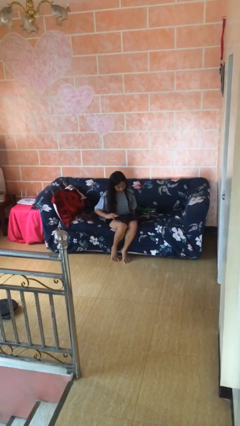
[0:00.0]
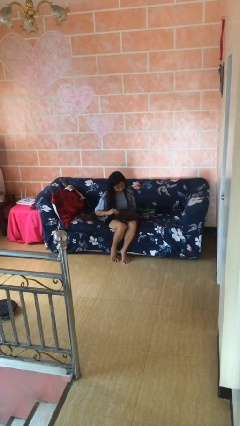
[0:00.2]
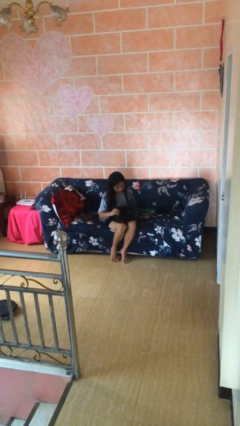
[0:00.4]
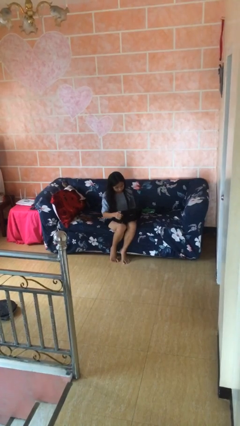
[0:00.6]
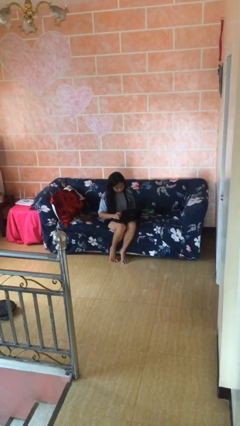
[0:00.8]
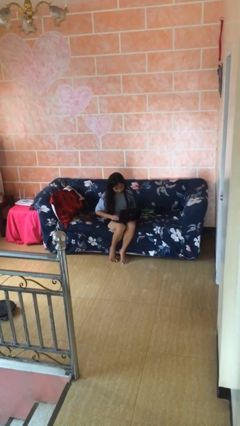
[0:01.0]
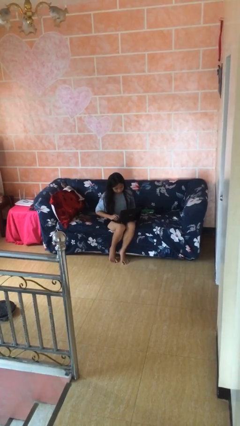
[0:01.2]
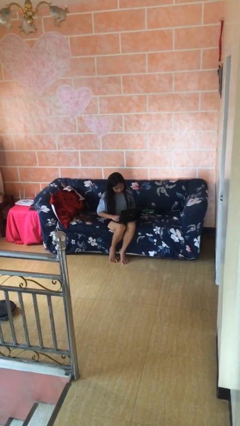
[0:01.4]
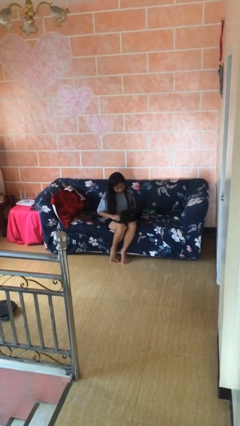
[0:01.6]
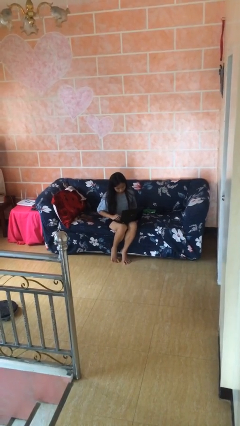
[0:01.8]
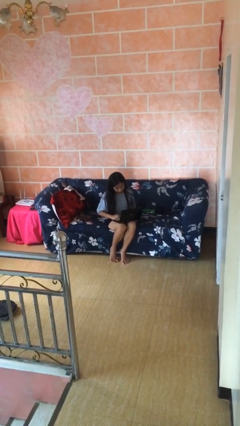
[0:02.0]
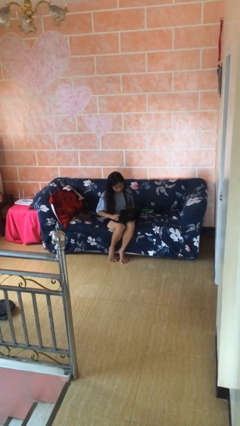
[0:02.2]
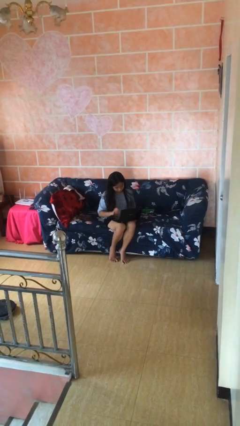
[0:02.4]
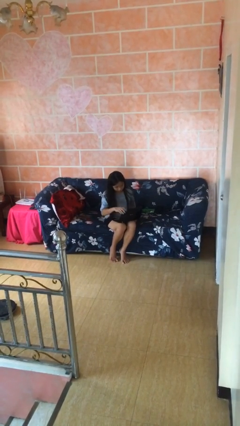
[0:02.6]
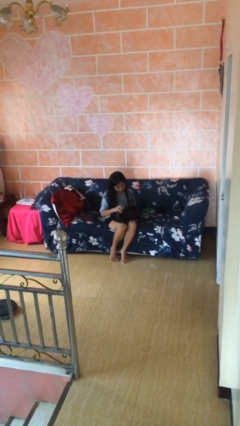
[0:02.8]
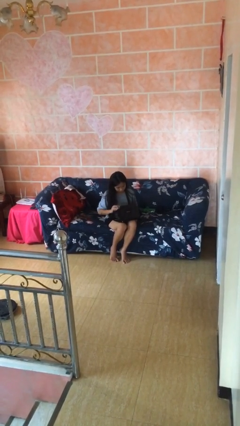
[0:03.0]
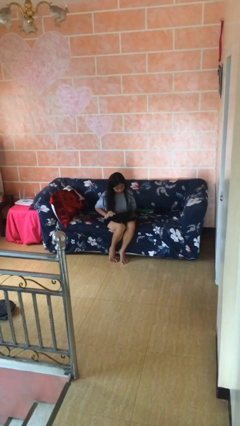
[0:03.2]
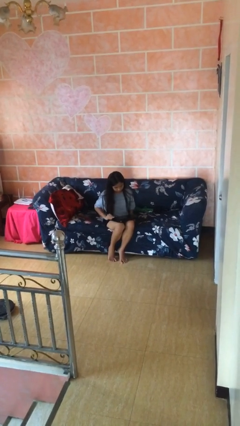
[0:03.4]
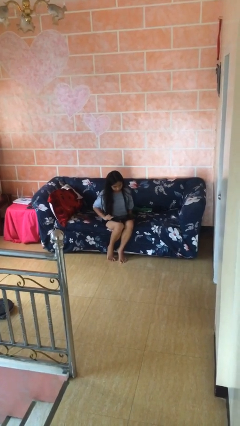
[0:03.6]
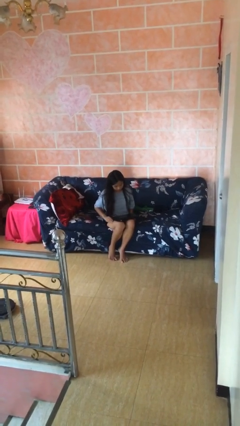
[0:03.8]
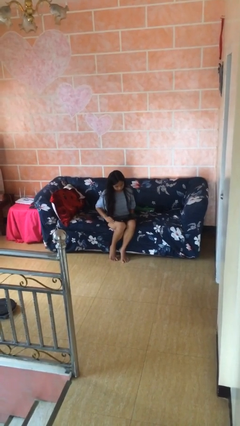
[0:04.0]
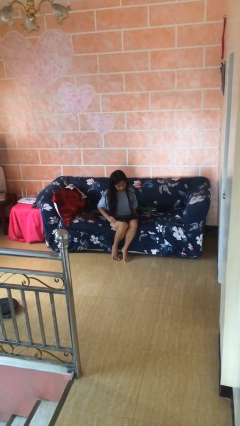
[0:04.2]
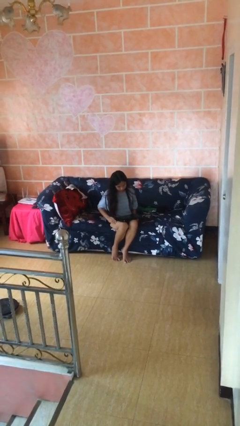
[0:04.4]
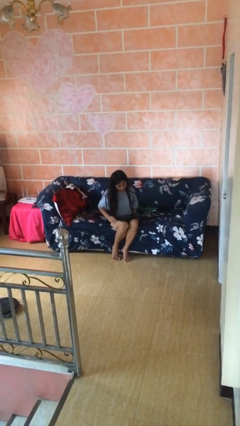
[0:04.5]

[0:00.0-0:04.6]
person interacts with laptop

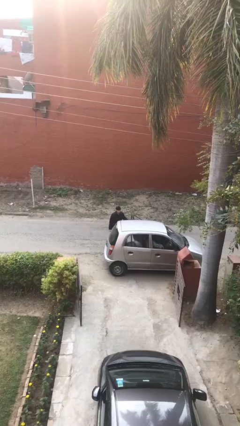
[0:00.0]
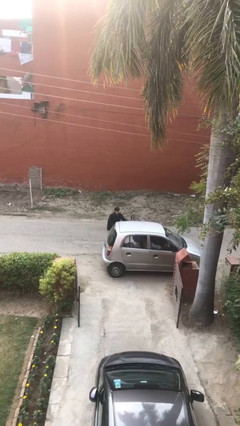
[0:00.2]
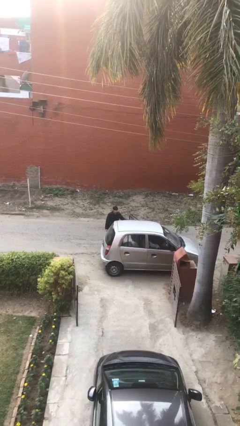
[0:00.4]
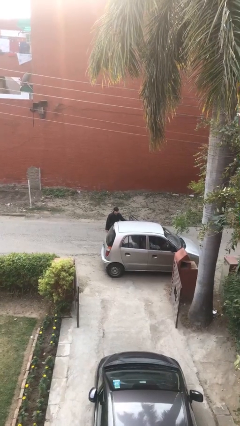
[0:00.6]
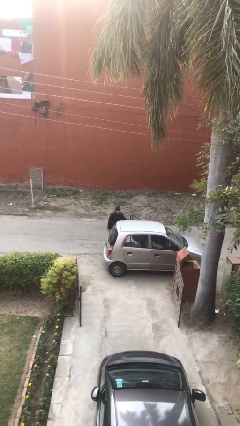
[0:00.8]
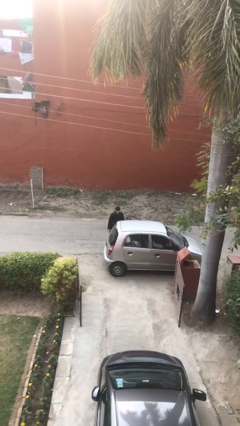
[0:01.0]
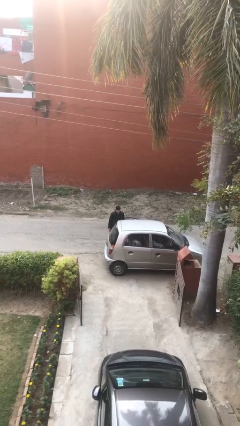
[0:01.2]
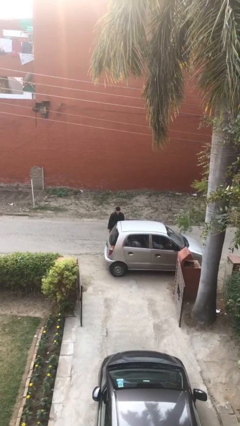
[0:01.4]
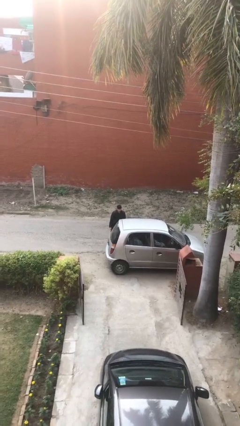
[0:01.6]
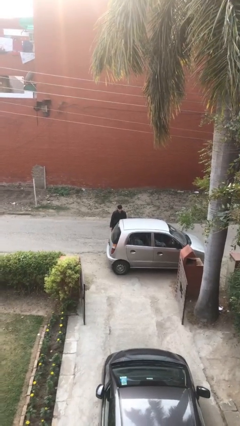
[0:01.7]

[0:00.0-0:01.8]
person closes car door

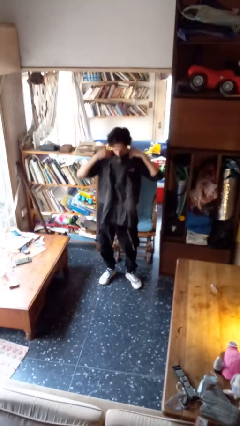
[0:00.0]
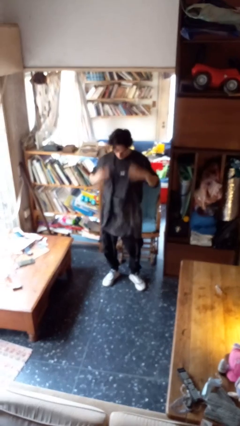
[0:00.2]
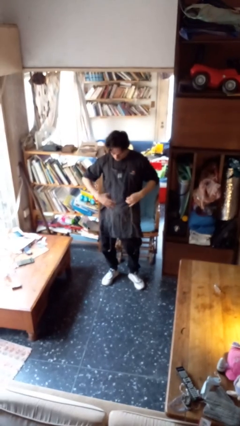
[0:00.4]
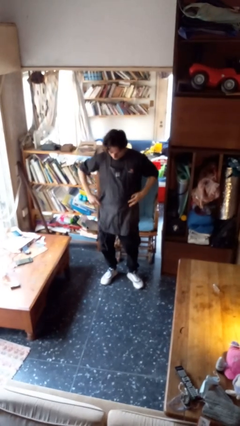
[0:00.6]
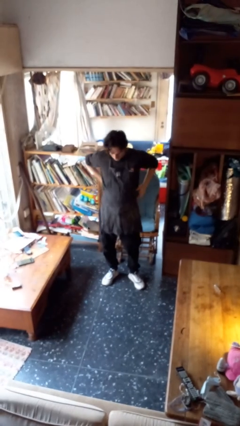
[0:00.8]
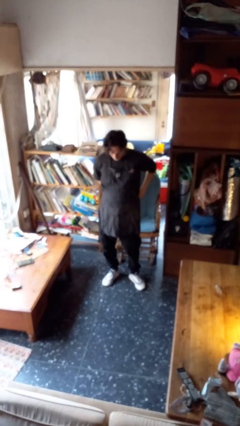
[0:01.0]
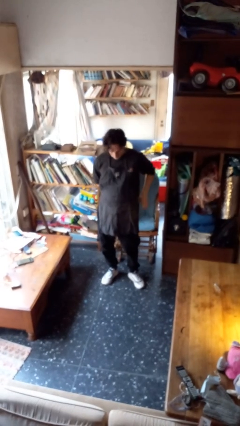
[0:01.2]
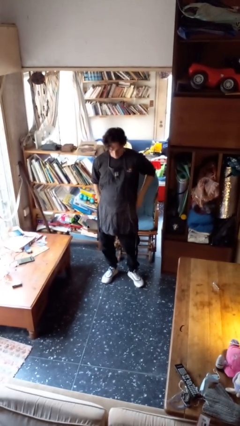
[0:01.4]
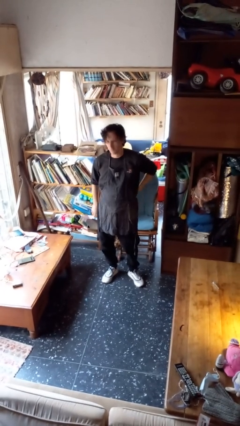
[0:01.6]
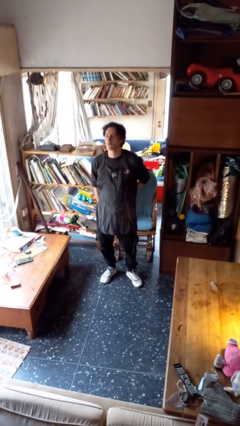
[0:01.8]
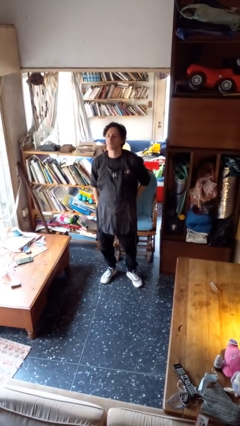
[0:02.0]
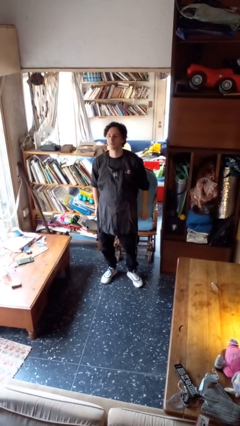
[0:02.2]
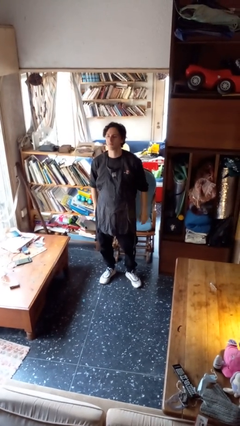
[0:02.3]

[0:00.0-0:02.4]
person puts on apron

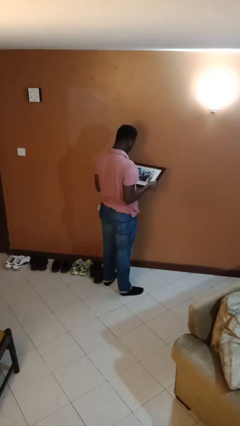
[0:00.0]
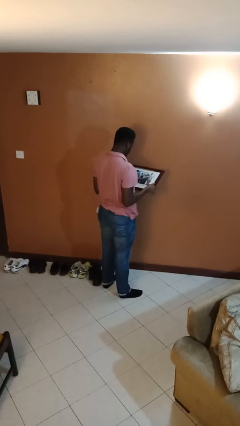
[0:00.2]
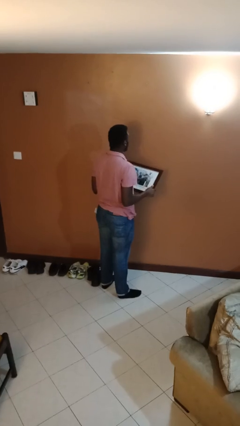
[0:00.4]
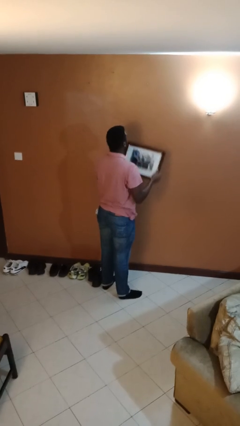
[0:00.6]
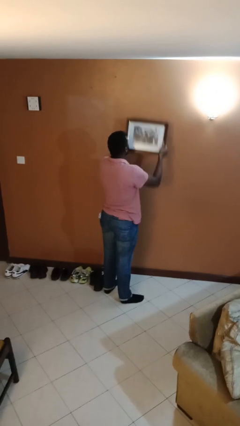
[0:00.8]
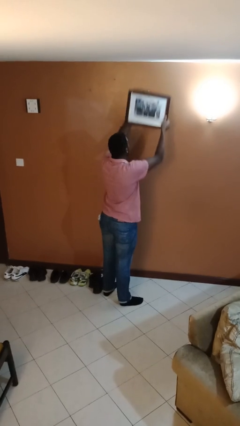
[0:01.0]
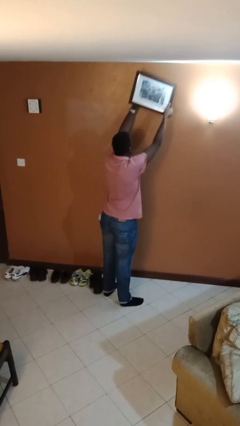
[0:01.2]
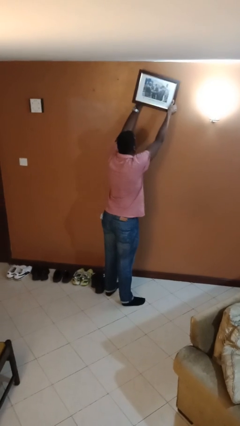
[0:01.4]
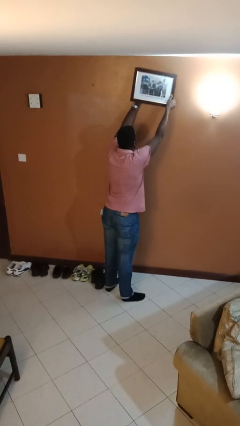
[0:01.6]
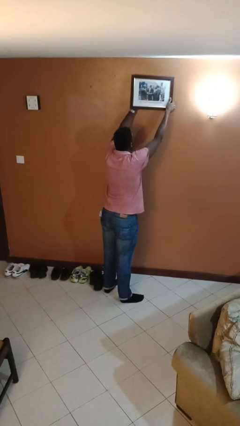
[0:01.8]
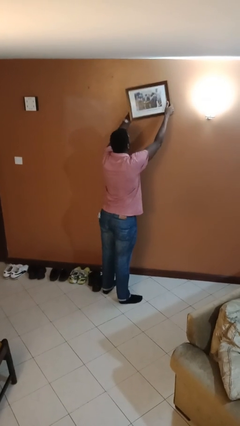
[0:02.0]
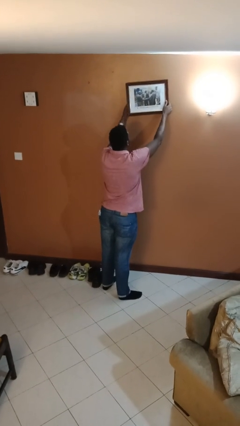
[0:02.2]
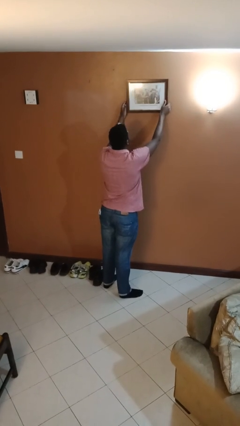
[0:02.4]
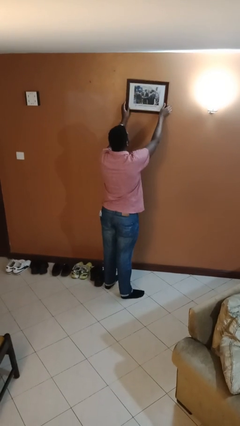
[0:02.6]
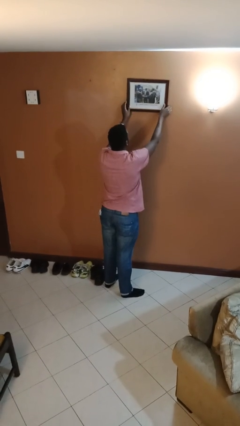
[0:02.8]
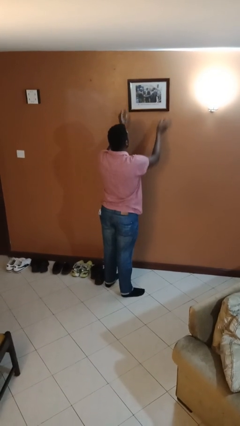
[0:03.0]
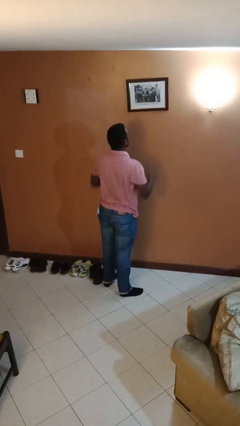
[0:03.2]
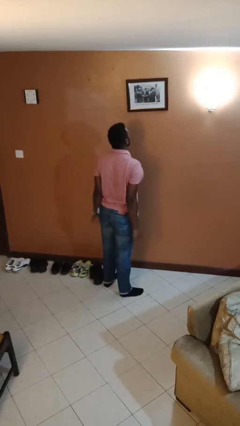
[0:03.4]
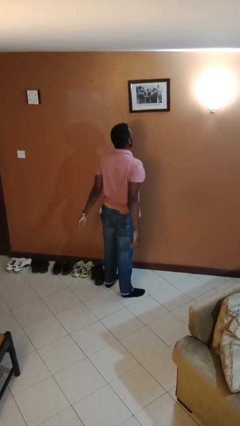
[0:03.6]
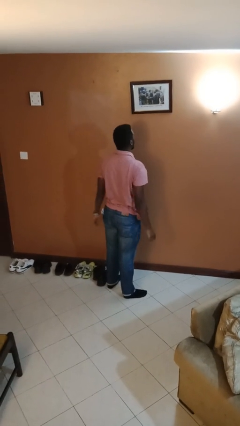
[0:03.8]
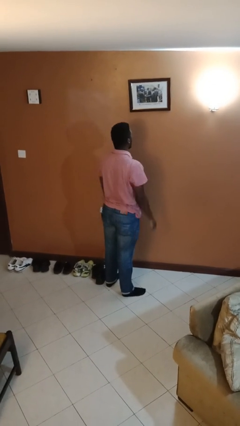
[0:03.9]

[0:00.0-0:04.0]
person puts up picture frame

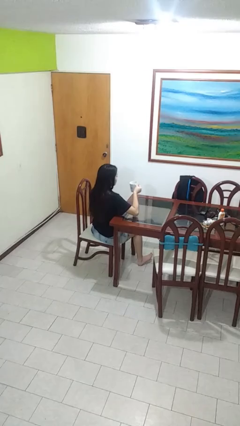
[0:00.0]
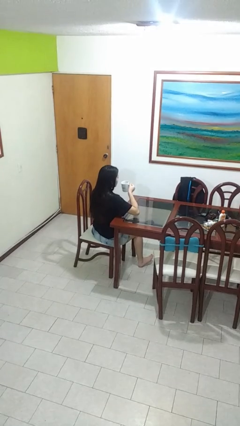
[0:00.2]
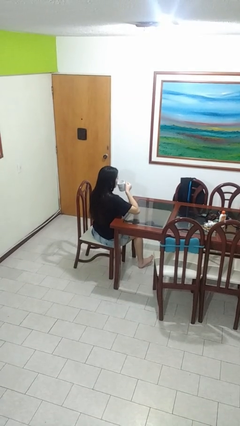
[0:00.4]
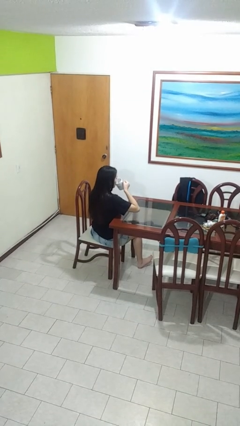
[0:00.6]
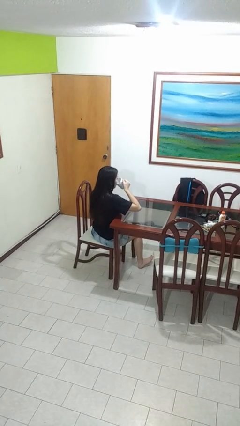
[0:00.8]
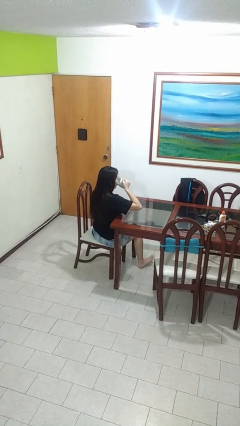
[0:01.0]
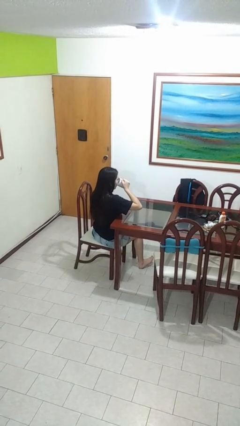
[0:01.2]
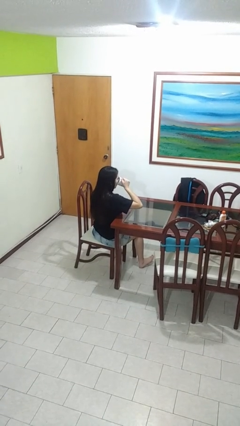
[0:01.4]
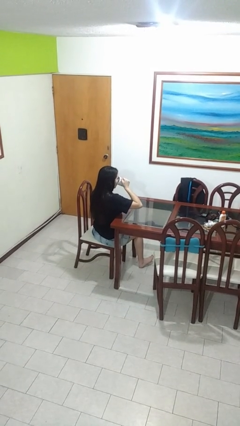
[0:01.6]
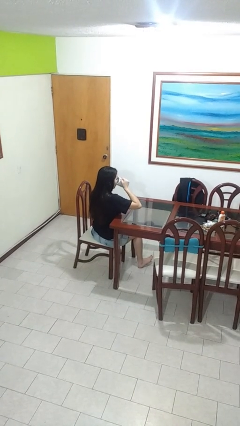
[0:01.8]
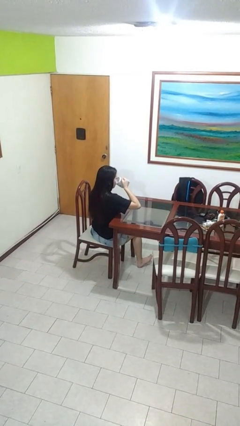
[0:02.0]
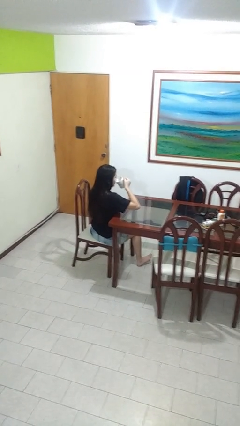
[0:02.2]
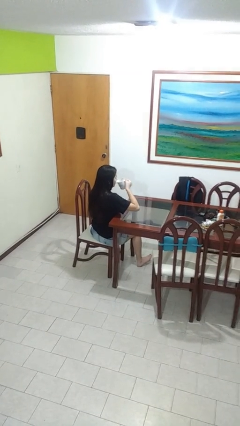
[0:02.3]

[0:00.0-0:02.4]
person drinks from mug

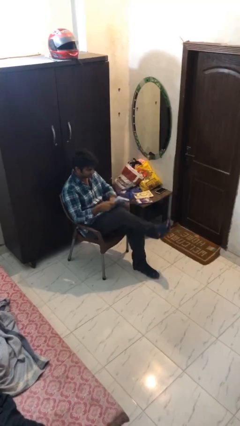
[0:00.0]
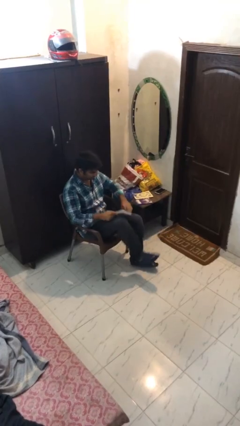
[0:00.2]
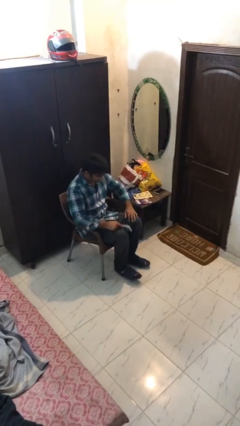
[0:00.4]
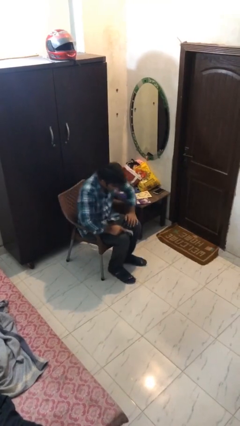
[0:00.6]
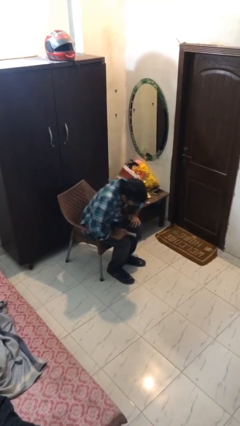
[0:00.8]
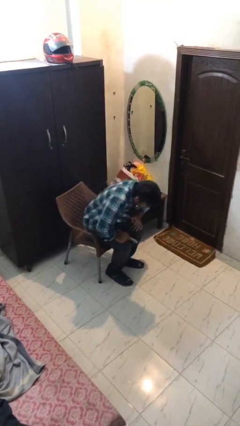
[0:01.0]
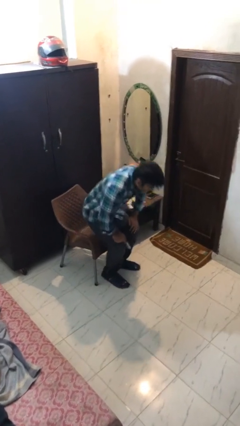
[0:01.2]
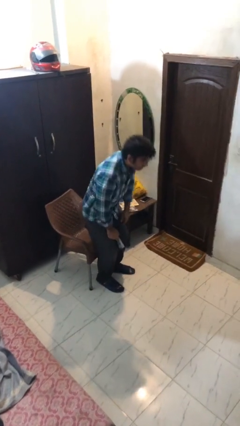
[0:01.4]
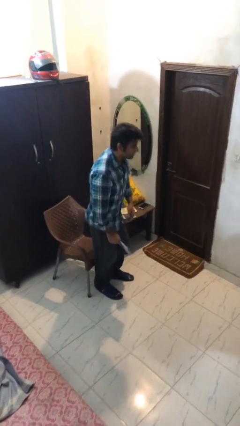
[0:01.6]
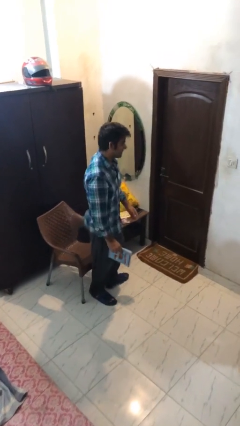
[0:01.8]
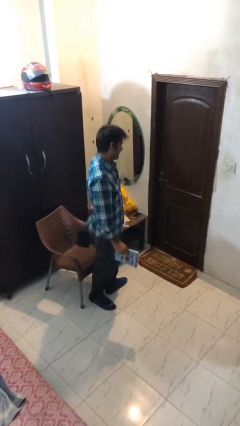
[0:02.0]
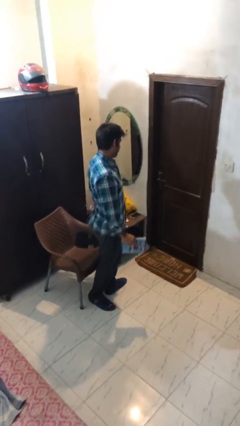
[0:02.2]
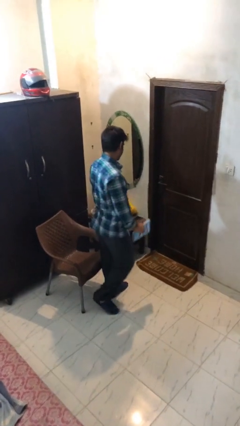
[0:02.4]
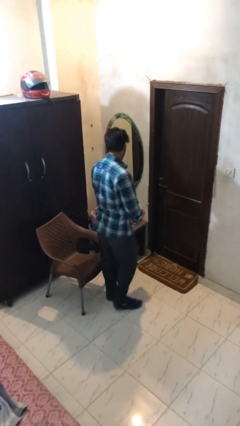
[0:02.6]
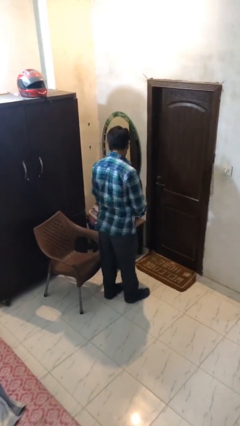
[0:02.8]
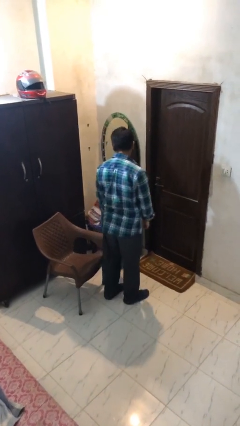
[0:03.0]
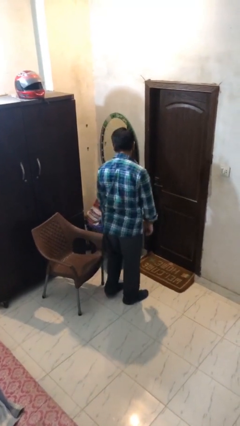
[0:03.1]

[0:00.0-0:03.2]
person stands up
